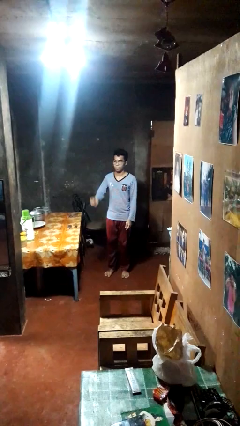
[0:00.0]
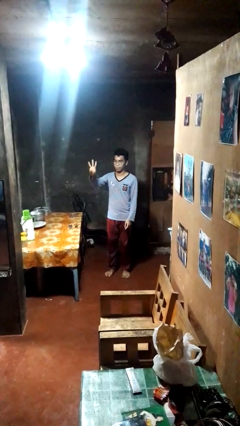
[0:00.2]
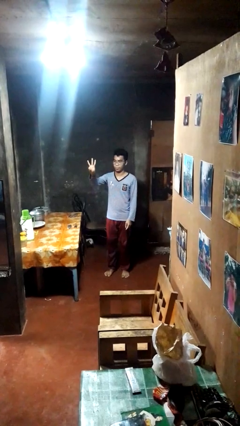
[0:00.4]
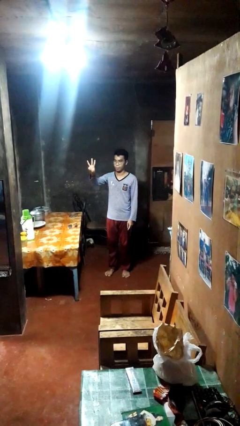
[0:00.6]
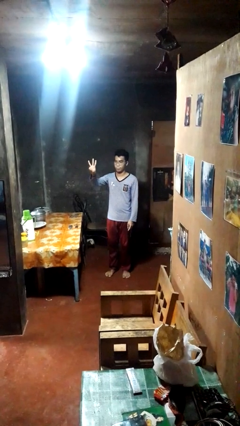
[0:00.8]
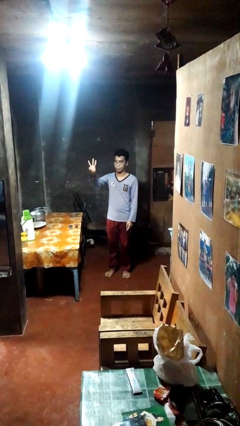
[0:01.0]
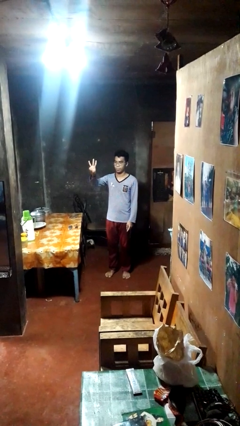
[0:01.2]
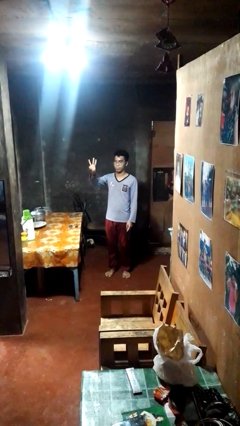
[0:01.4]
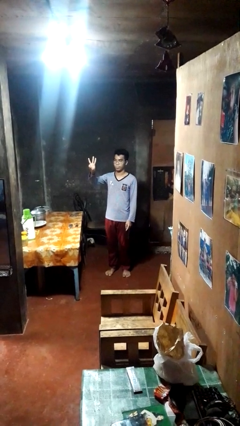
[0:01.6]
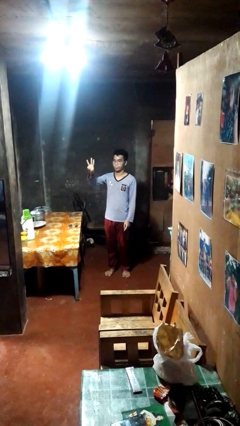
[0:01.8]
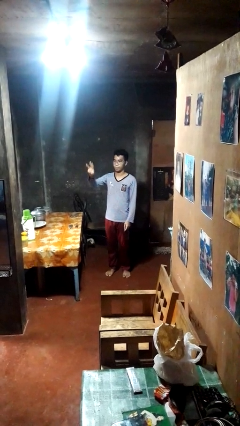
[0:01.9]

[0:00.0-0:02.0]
person gestures number three

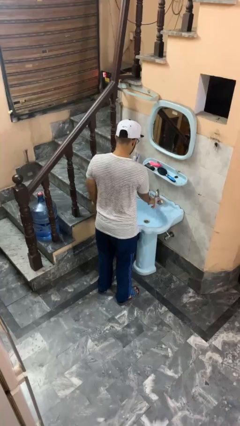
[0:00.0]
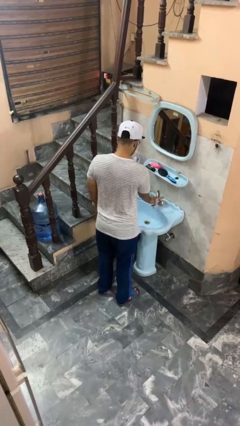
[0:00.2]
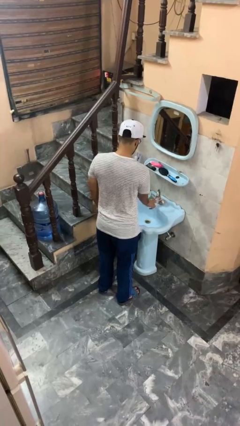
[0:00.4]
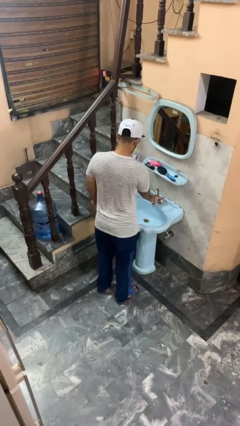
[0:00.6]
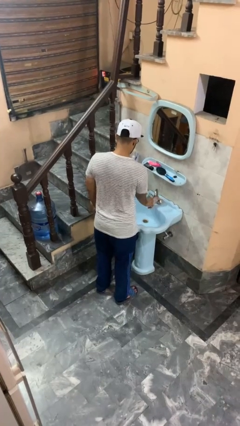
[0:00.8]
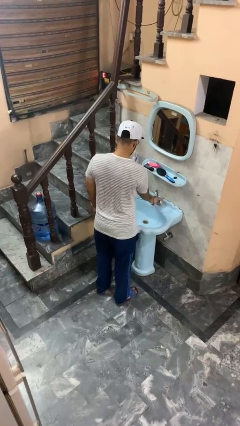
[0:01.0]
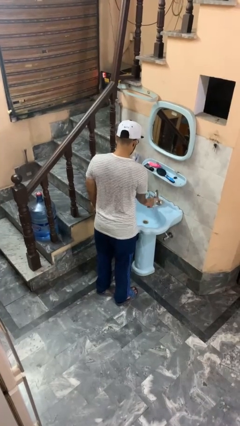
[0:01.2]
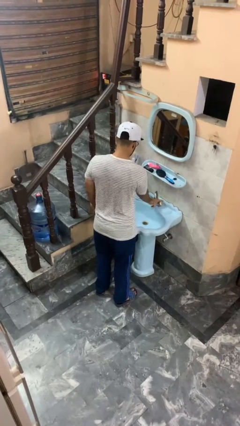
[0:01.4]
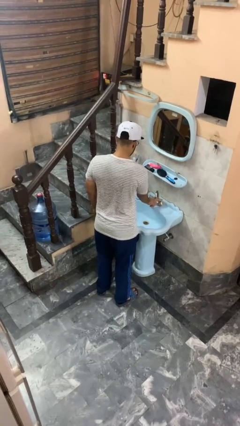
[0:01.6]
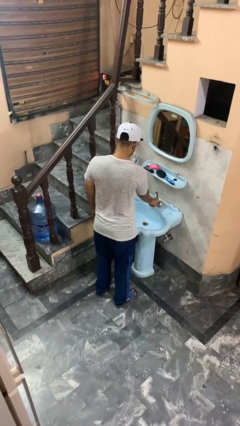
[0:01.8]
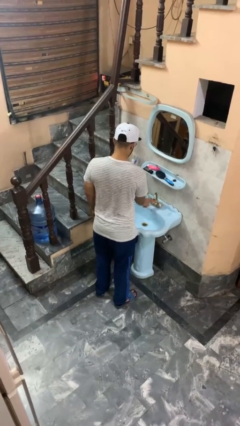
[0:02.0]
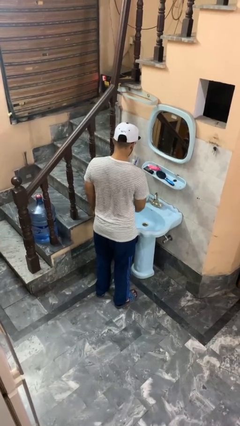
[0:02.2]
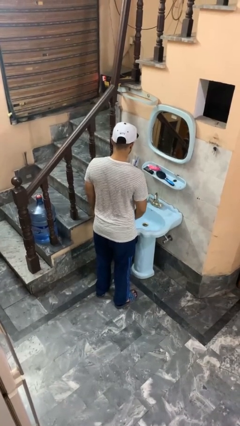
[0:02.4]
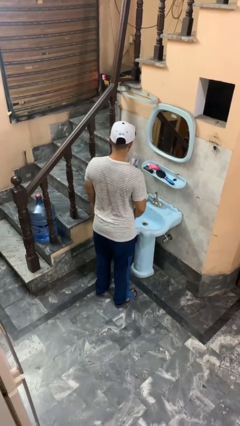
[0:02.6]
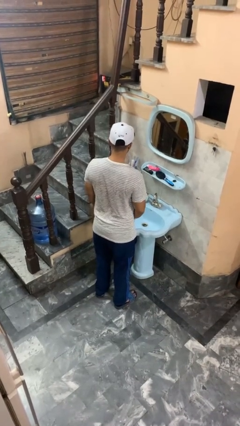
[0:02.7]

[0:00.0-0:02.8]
person turns off faucet

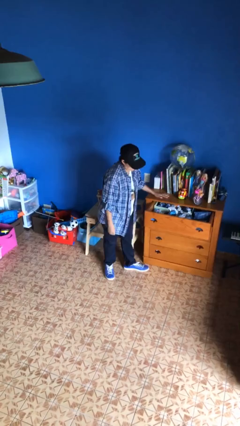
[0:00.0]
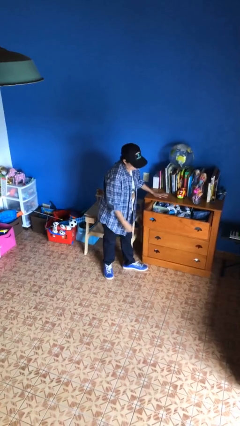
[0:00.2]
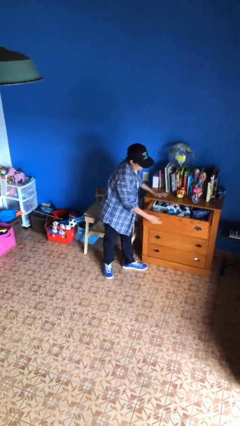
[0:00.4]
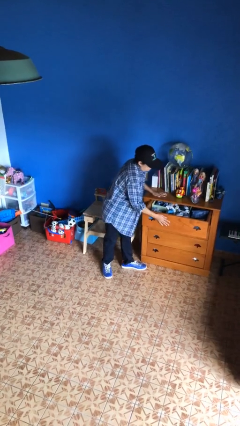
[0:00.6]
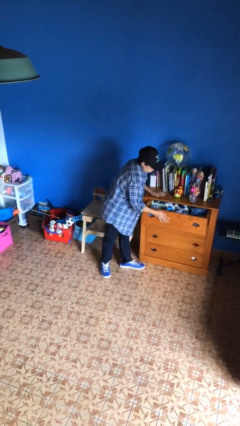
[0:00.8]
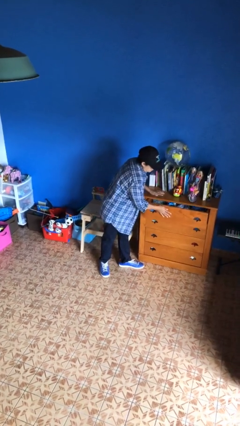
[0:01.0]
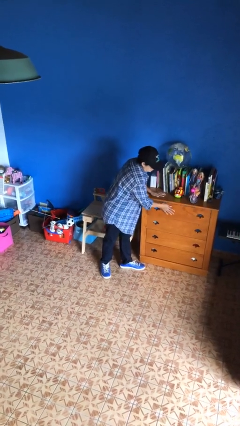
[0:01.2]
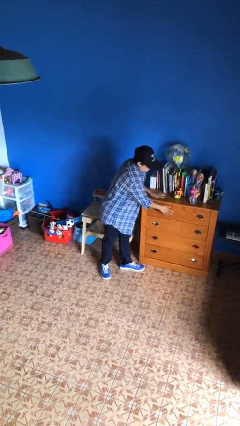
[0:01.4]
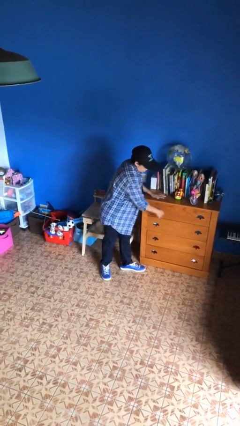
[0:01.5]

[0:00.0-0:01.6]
person closes dresser drawer

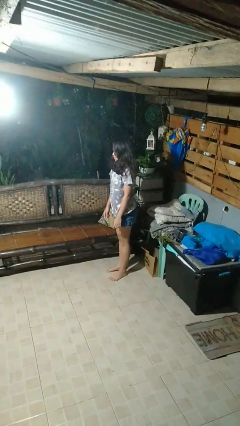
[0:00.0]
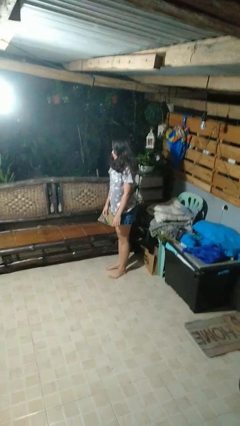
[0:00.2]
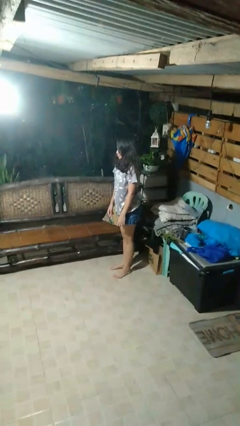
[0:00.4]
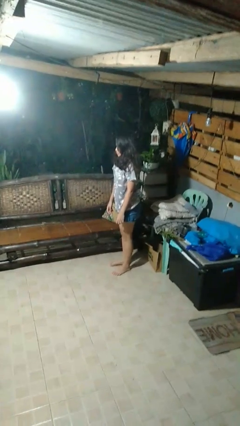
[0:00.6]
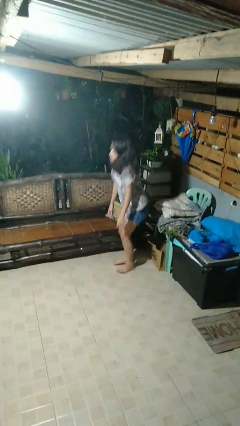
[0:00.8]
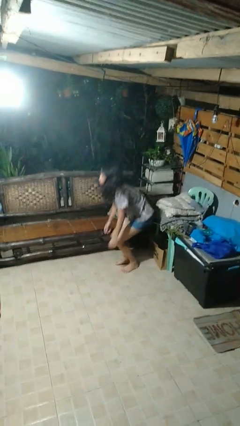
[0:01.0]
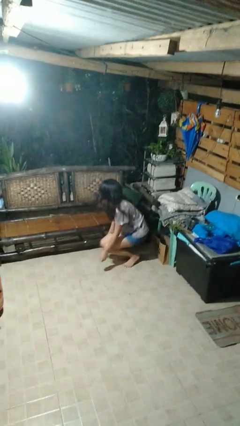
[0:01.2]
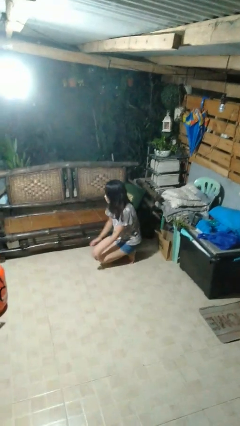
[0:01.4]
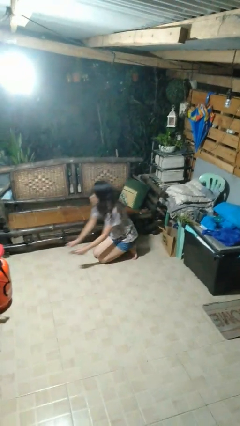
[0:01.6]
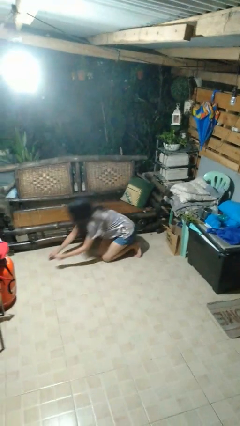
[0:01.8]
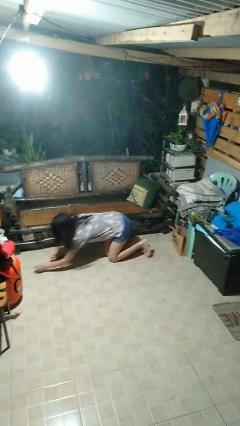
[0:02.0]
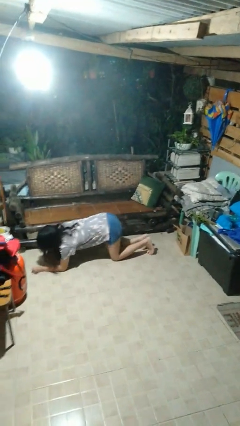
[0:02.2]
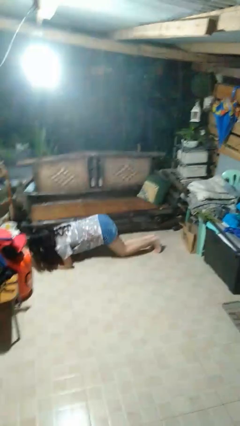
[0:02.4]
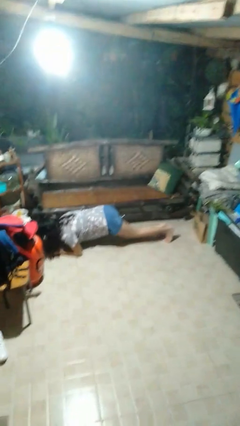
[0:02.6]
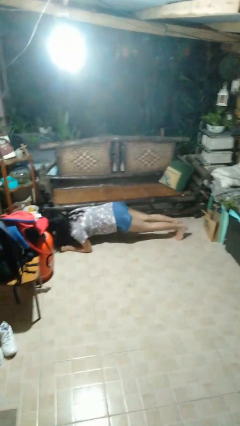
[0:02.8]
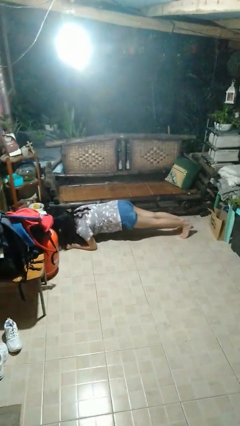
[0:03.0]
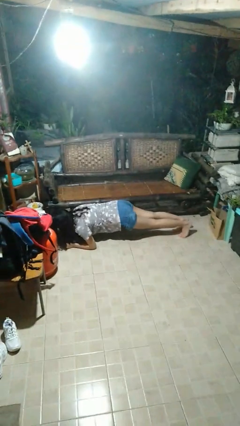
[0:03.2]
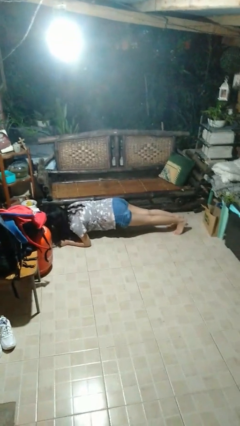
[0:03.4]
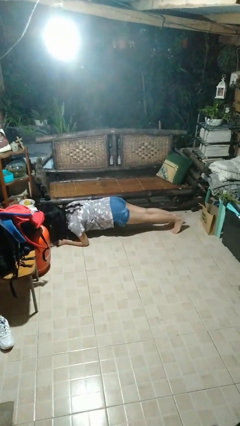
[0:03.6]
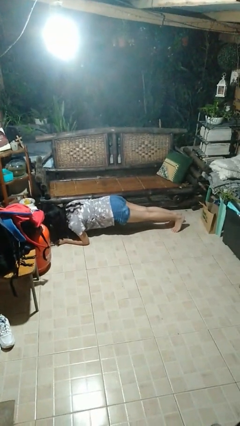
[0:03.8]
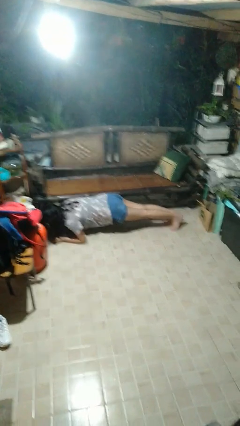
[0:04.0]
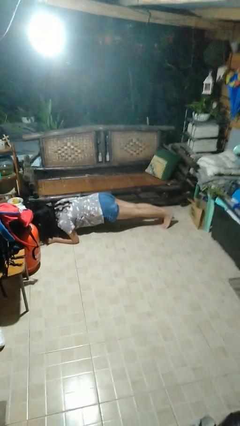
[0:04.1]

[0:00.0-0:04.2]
person exercises with plank

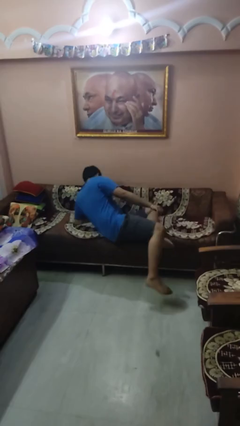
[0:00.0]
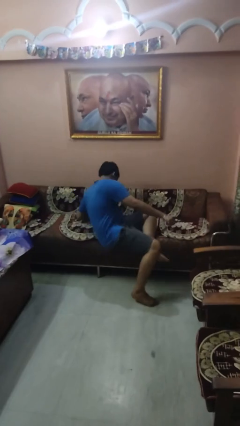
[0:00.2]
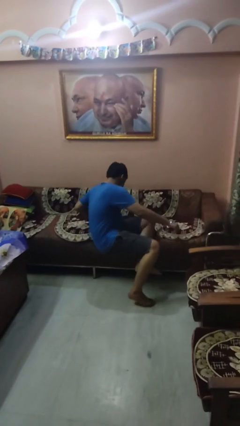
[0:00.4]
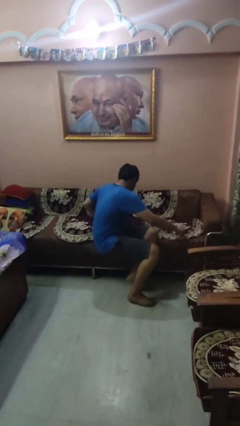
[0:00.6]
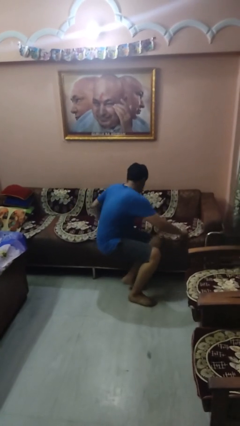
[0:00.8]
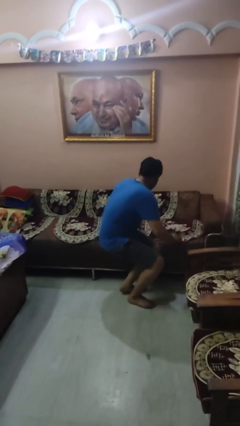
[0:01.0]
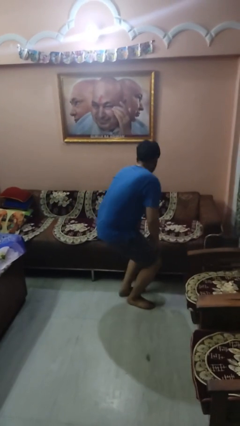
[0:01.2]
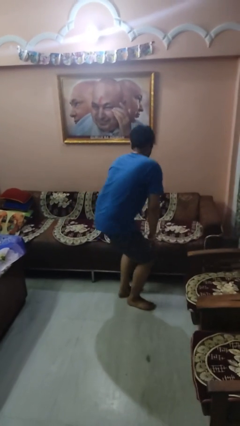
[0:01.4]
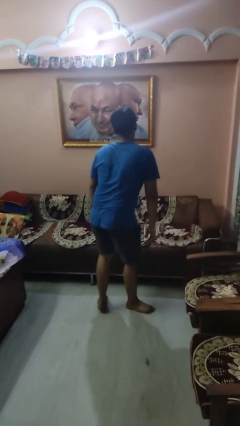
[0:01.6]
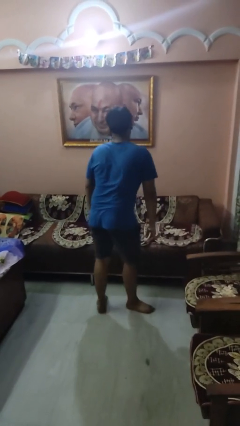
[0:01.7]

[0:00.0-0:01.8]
person stands up

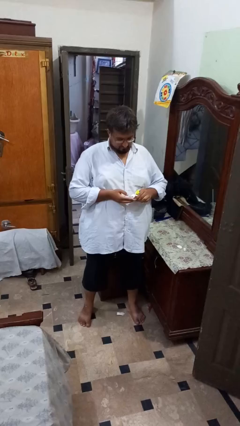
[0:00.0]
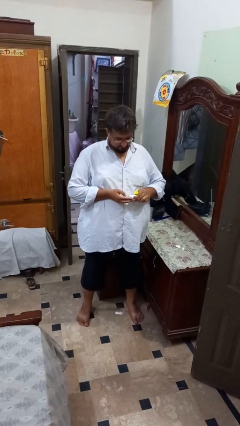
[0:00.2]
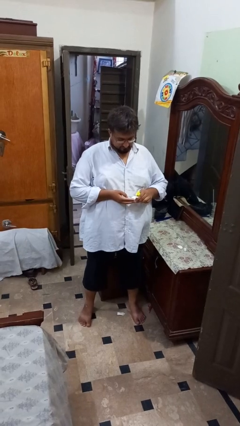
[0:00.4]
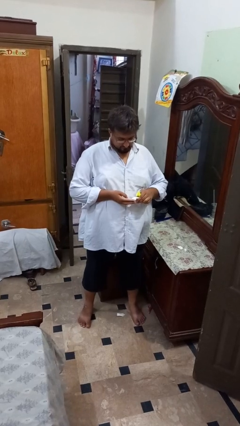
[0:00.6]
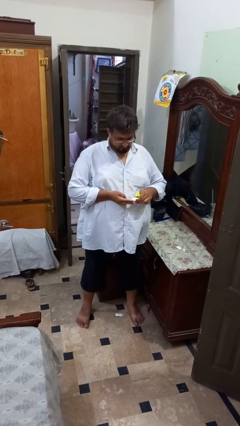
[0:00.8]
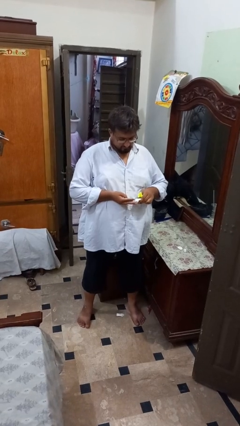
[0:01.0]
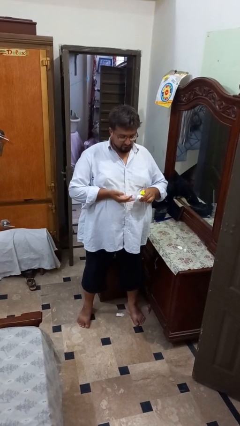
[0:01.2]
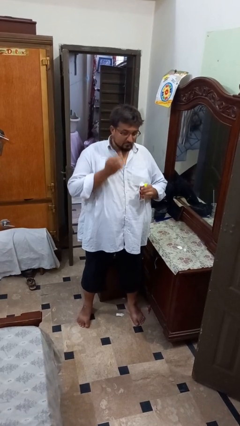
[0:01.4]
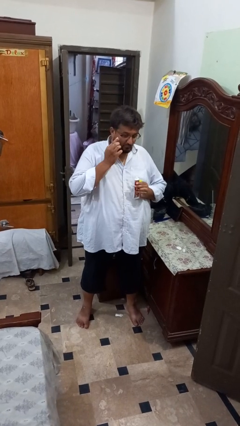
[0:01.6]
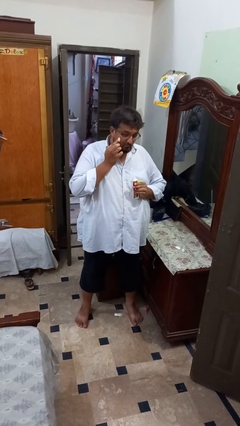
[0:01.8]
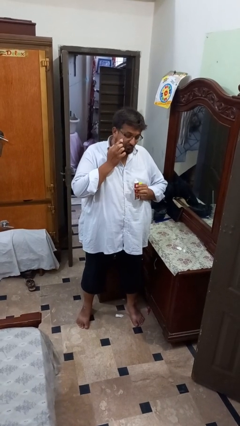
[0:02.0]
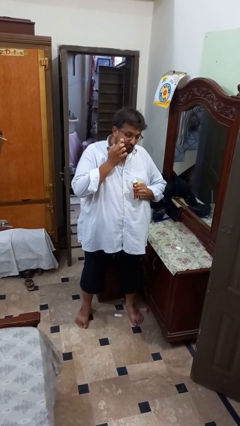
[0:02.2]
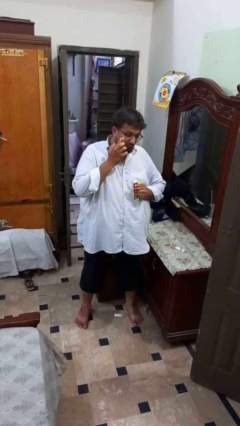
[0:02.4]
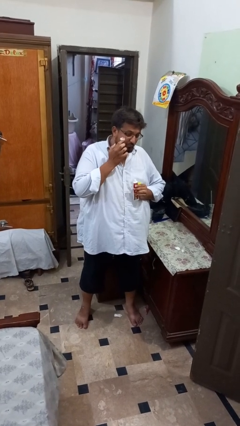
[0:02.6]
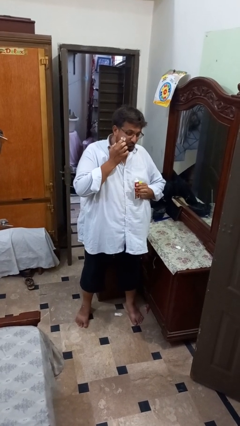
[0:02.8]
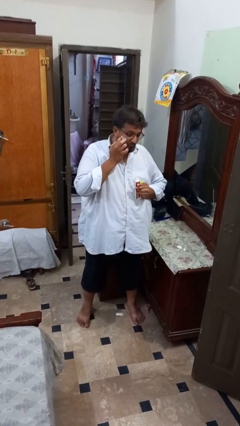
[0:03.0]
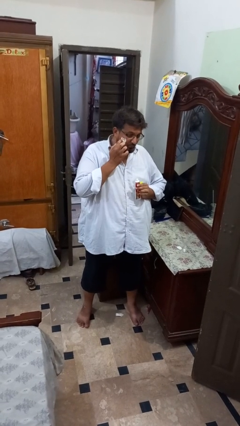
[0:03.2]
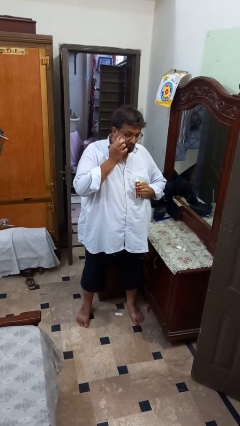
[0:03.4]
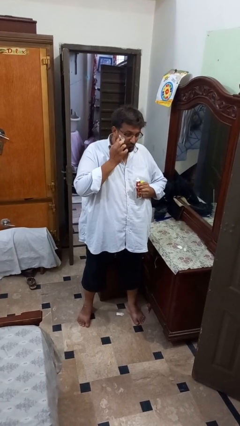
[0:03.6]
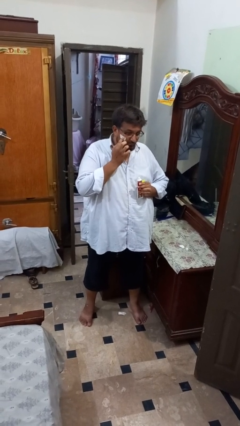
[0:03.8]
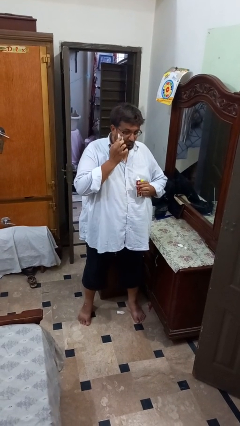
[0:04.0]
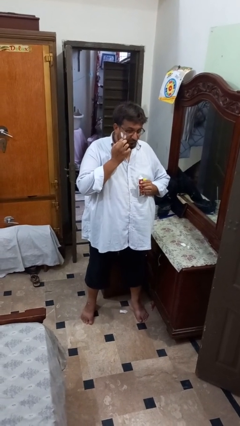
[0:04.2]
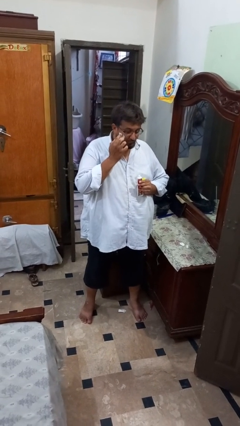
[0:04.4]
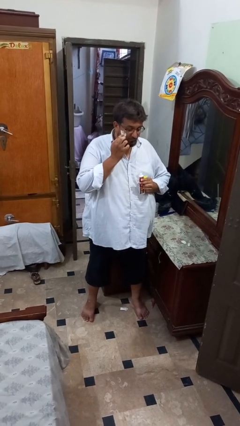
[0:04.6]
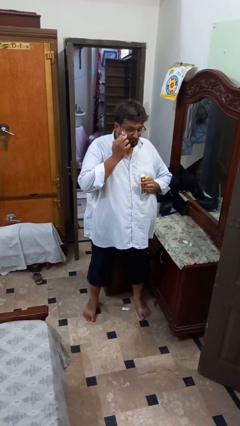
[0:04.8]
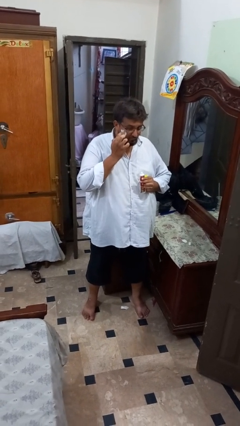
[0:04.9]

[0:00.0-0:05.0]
person applies shaving cream
